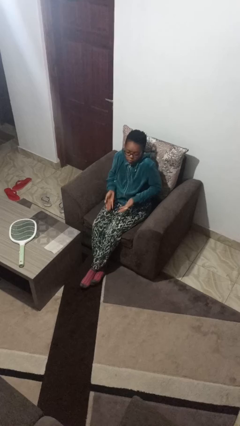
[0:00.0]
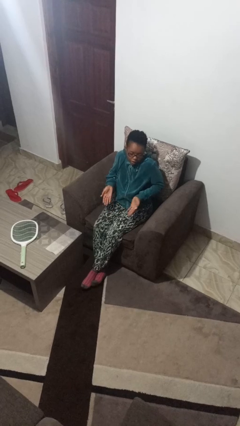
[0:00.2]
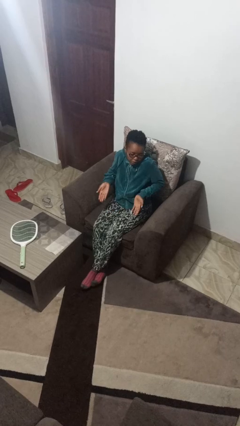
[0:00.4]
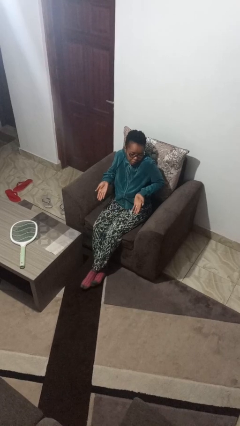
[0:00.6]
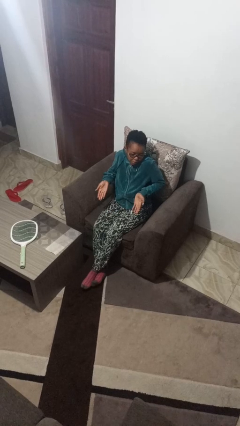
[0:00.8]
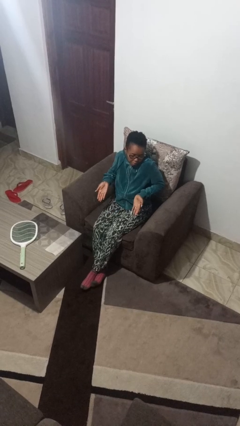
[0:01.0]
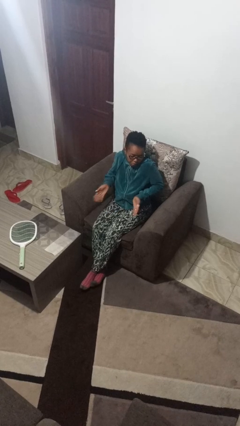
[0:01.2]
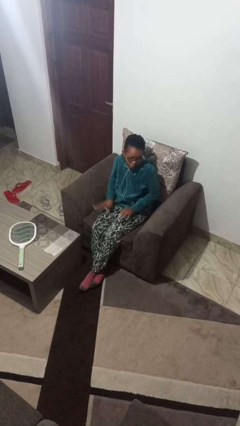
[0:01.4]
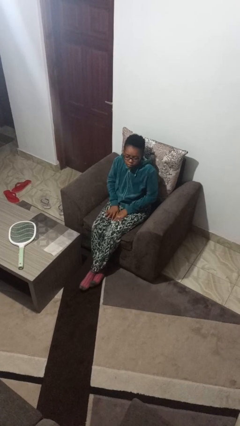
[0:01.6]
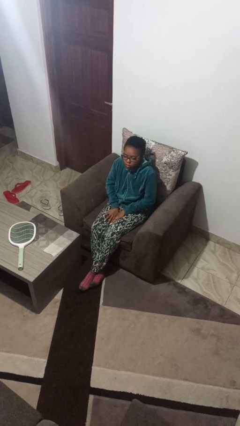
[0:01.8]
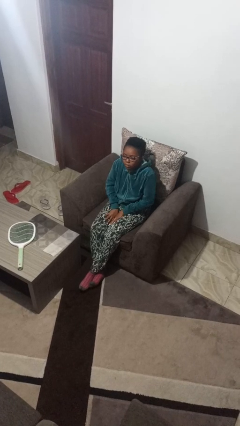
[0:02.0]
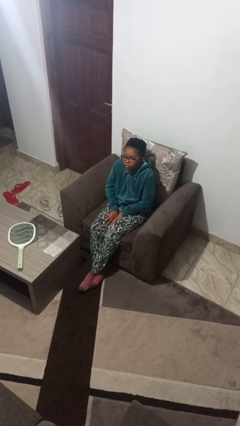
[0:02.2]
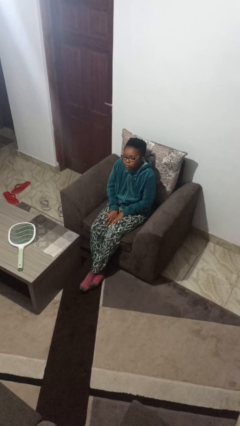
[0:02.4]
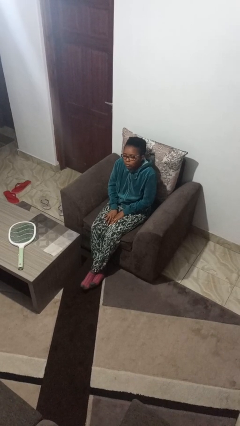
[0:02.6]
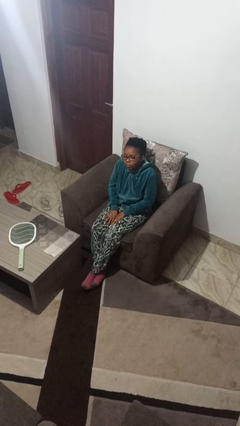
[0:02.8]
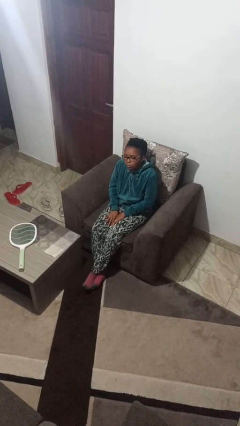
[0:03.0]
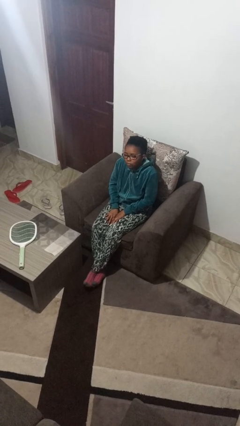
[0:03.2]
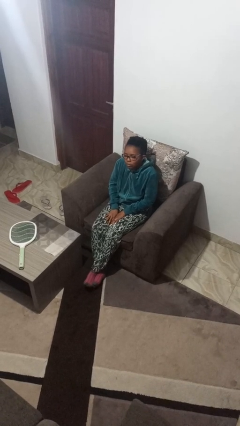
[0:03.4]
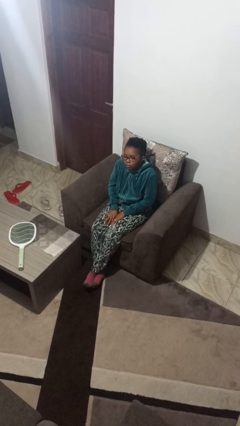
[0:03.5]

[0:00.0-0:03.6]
person shrugs

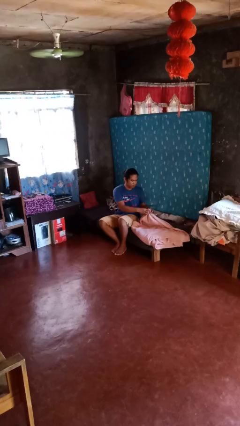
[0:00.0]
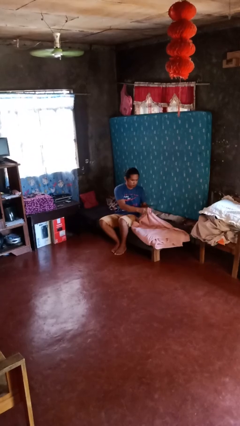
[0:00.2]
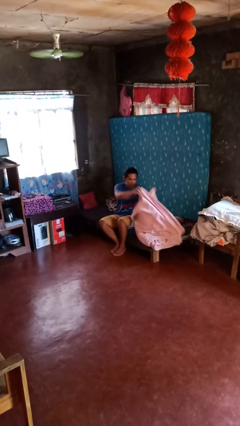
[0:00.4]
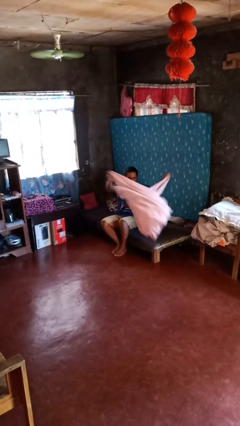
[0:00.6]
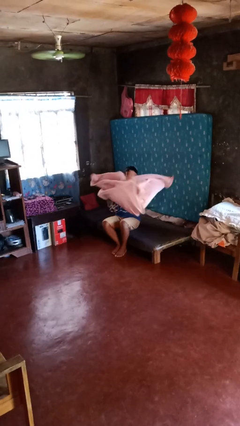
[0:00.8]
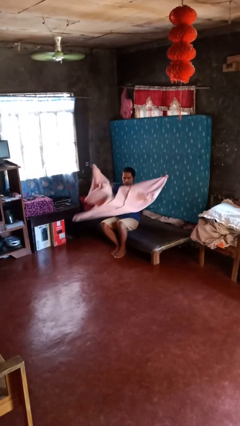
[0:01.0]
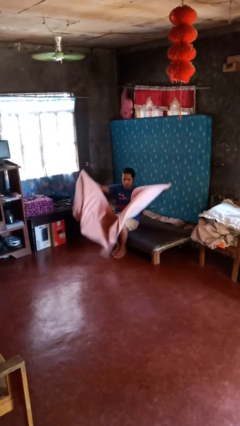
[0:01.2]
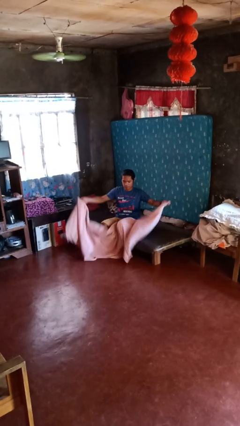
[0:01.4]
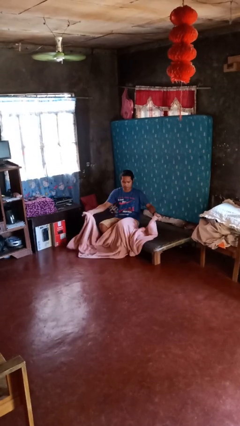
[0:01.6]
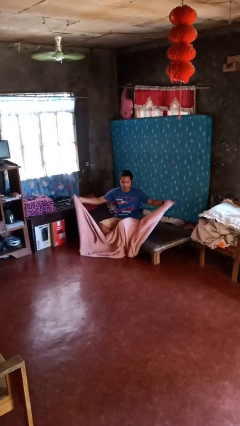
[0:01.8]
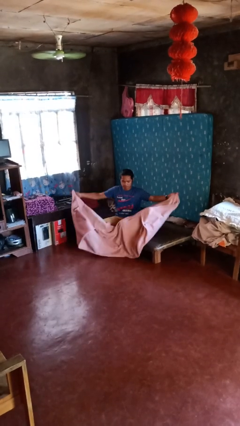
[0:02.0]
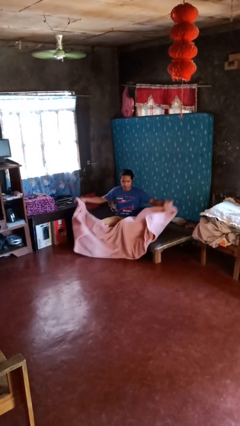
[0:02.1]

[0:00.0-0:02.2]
person unfolds blanket

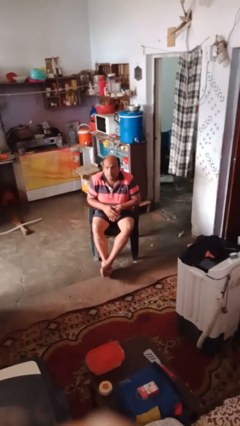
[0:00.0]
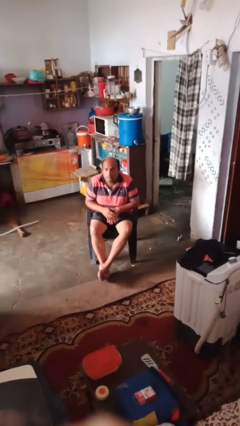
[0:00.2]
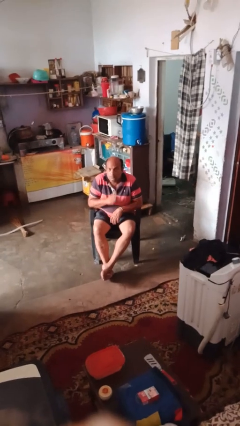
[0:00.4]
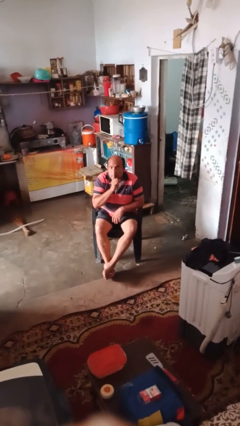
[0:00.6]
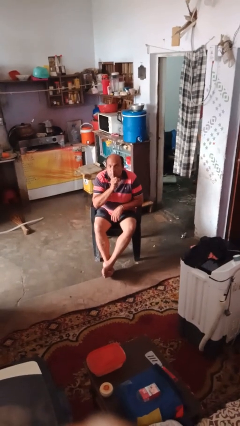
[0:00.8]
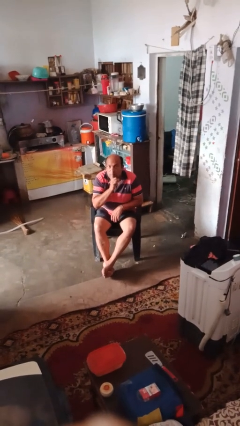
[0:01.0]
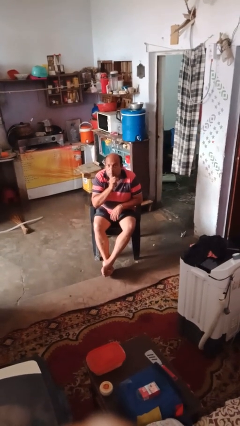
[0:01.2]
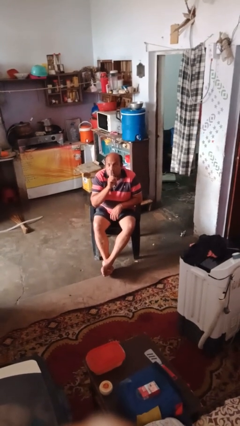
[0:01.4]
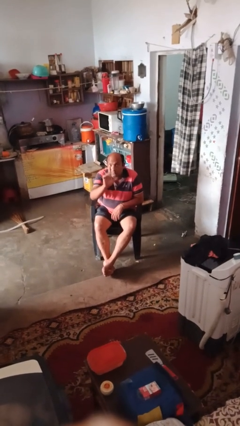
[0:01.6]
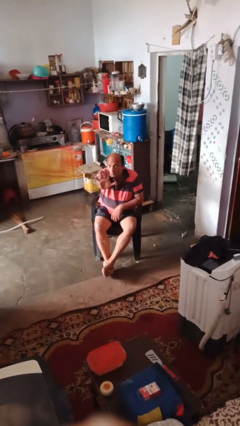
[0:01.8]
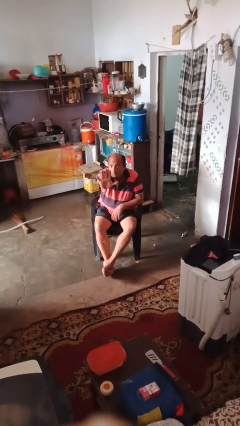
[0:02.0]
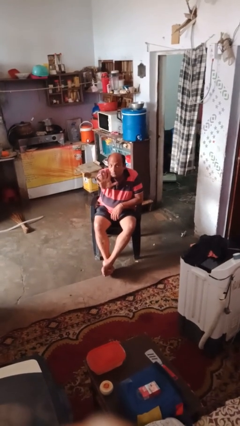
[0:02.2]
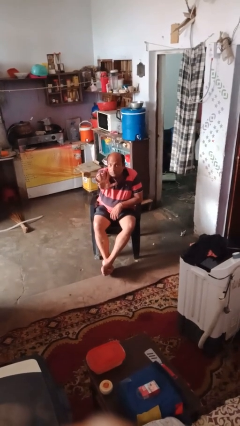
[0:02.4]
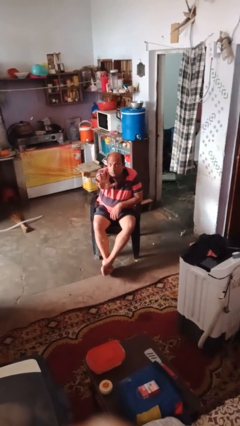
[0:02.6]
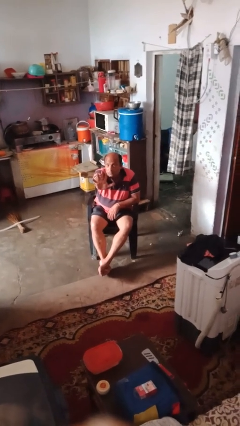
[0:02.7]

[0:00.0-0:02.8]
person gestures be quiet

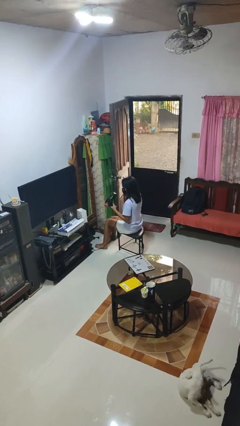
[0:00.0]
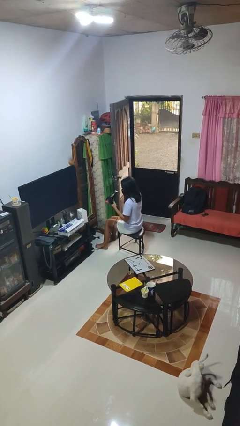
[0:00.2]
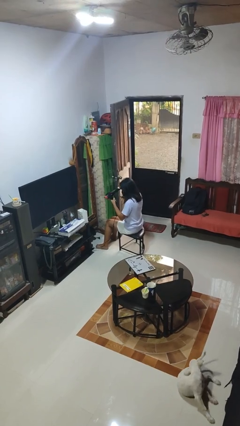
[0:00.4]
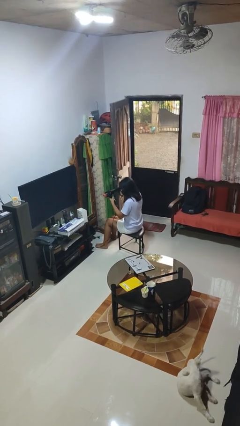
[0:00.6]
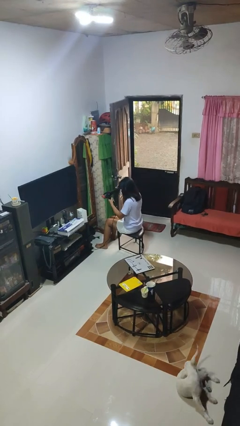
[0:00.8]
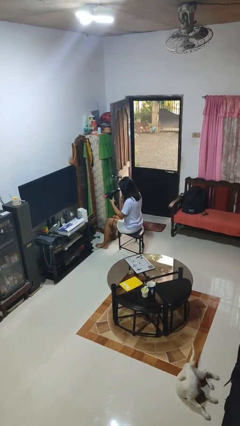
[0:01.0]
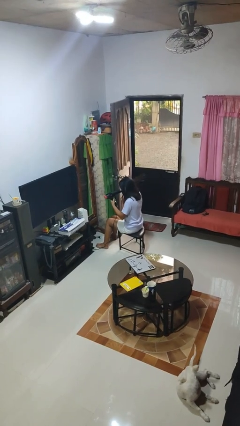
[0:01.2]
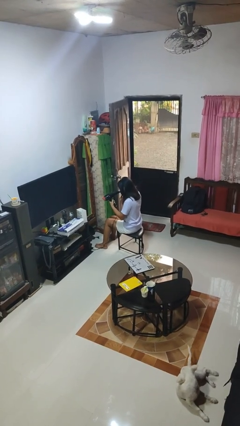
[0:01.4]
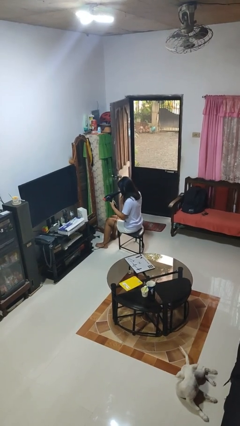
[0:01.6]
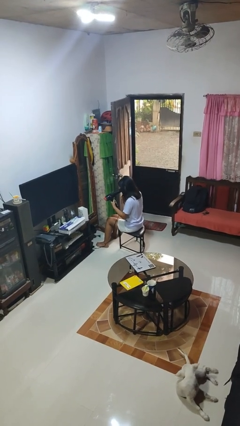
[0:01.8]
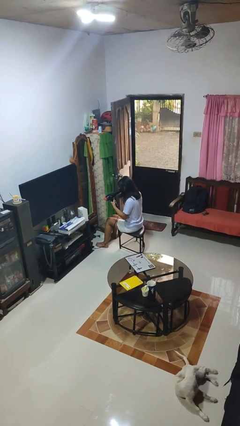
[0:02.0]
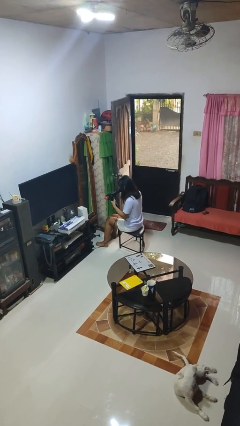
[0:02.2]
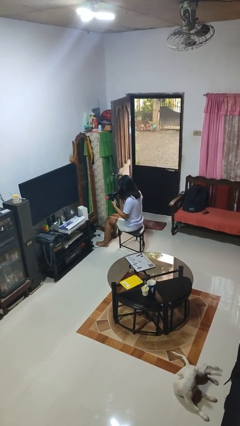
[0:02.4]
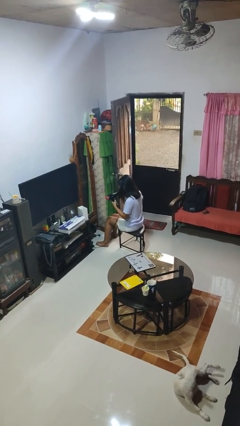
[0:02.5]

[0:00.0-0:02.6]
person dries hair with hairdryer

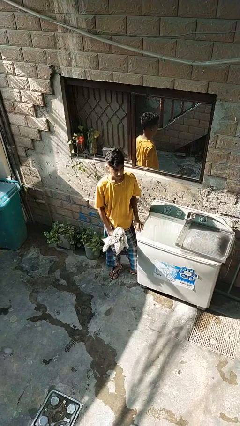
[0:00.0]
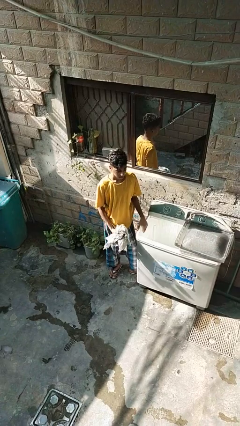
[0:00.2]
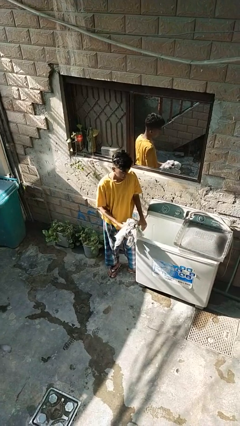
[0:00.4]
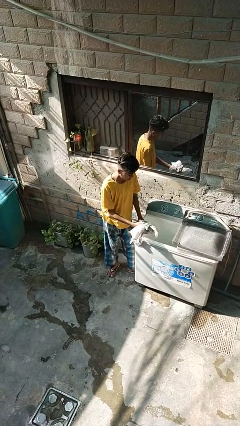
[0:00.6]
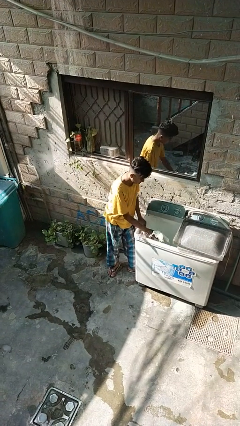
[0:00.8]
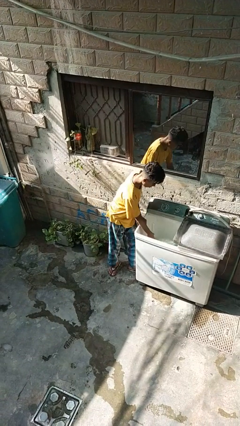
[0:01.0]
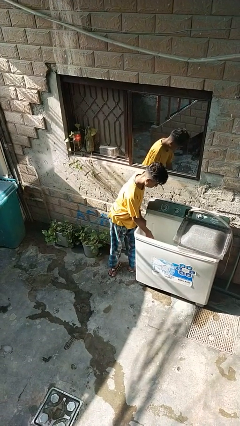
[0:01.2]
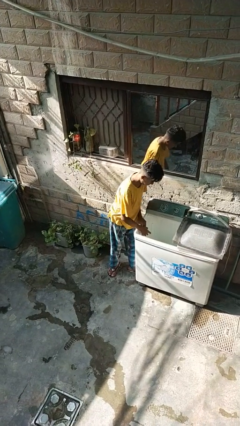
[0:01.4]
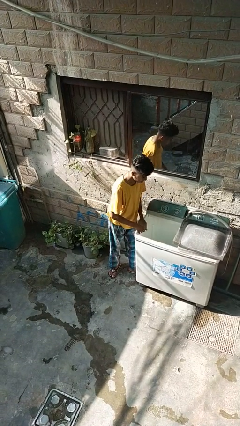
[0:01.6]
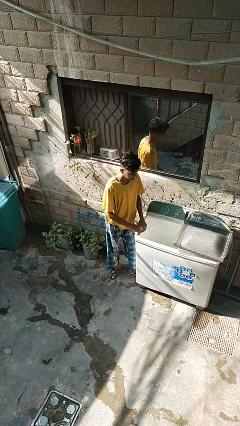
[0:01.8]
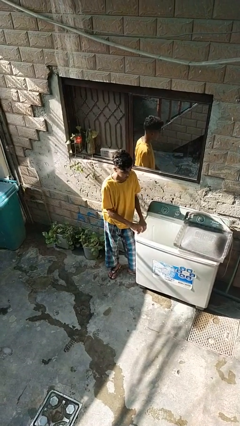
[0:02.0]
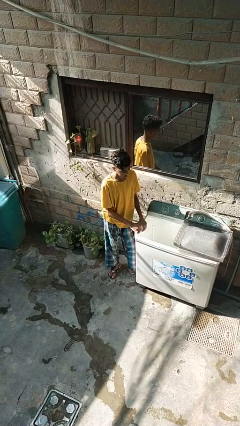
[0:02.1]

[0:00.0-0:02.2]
person loads clotheswasher

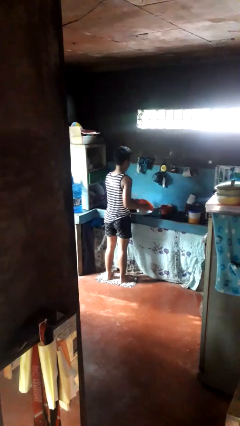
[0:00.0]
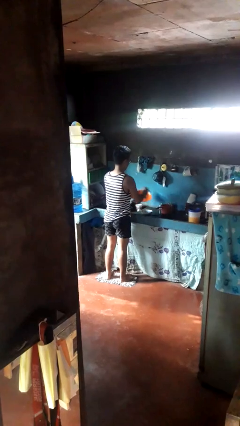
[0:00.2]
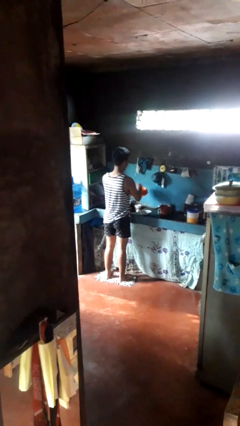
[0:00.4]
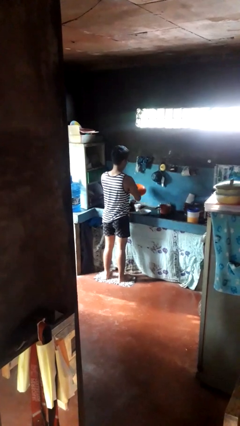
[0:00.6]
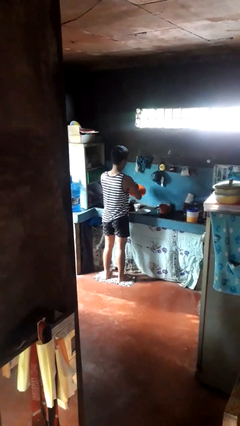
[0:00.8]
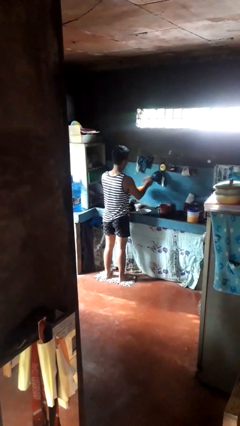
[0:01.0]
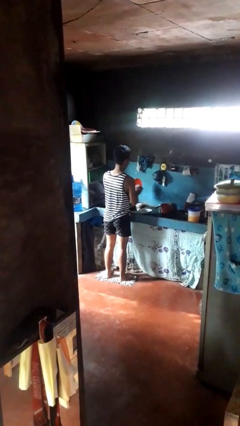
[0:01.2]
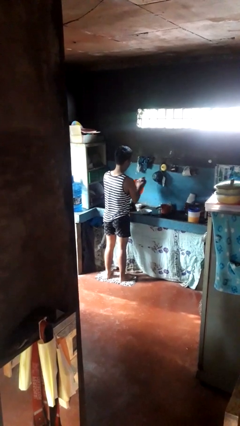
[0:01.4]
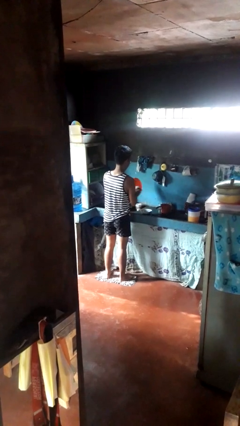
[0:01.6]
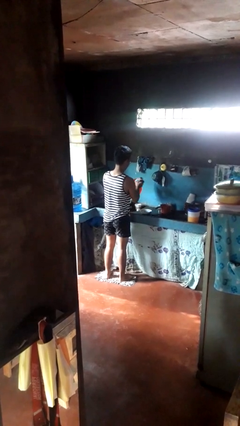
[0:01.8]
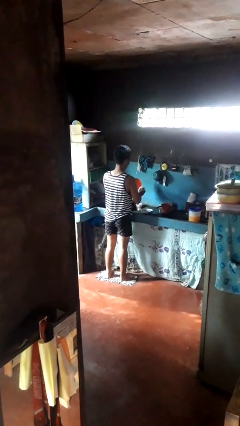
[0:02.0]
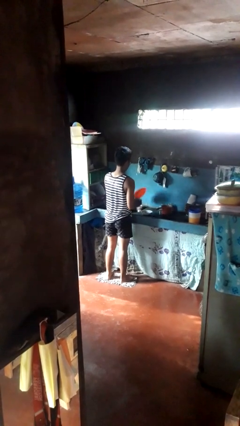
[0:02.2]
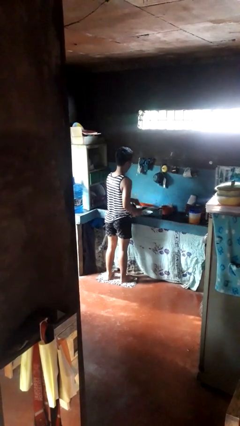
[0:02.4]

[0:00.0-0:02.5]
person dries dish

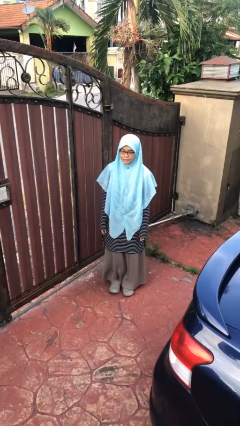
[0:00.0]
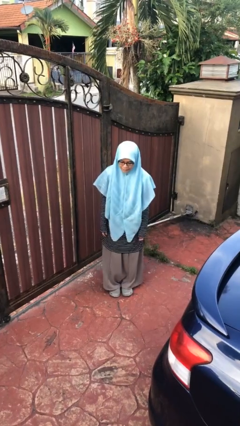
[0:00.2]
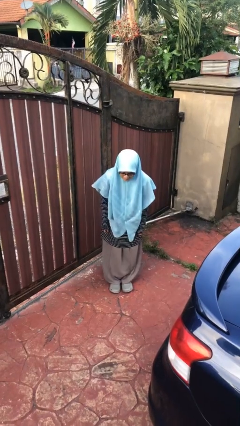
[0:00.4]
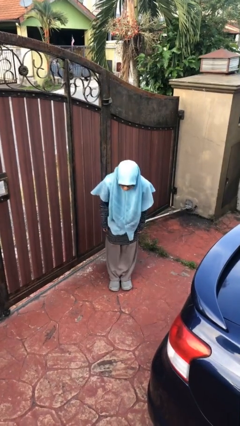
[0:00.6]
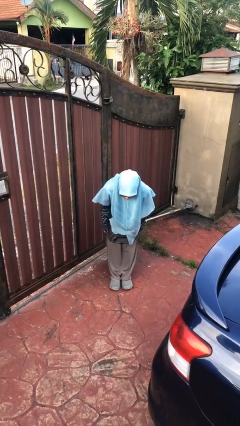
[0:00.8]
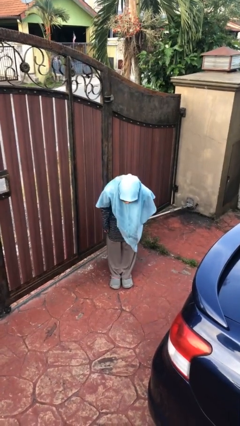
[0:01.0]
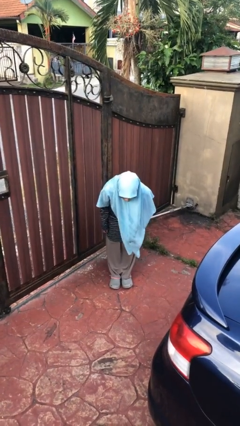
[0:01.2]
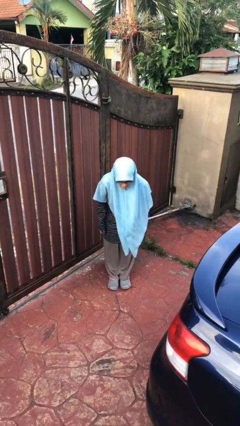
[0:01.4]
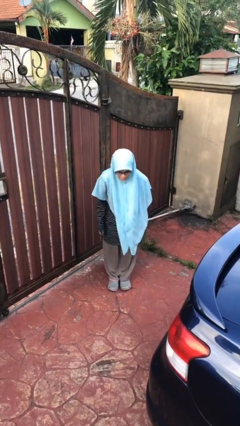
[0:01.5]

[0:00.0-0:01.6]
person bows
